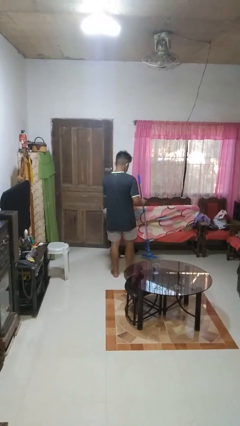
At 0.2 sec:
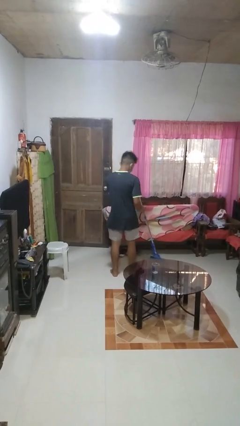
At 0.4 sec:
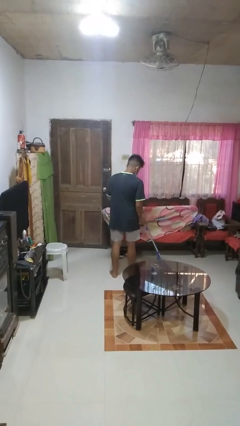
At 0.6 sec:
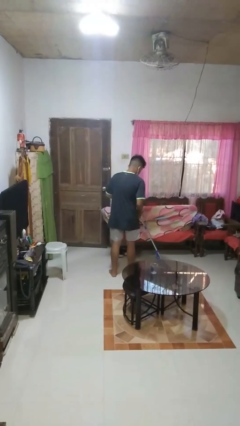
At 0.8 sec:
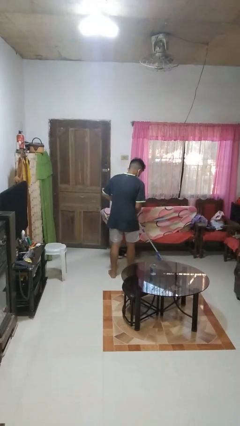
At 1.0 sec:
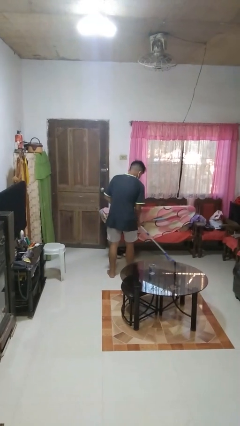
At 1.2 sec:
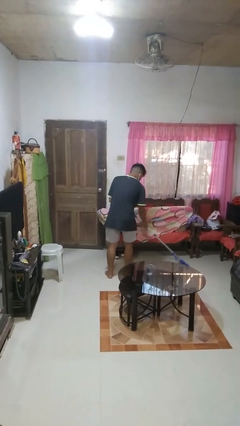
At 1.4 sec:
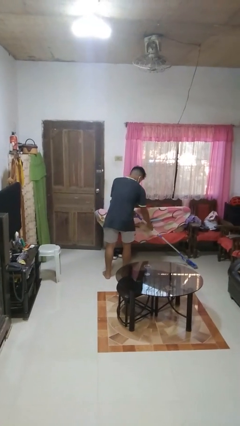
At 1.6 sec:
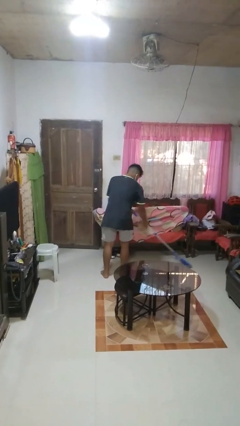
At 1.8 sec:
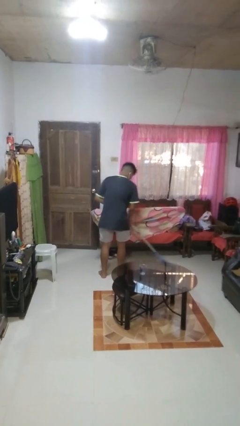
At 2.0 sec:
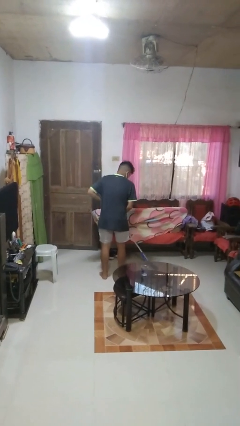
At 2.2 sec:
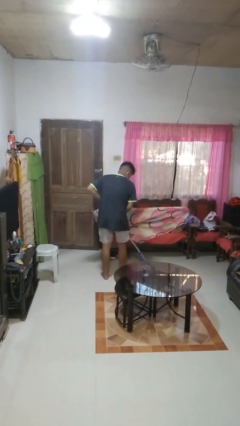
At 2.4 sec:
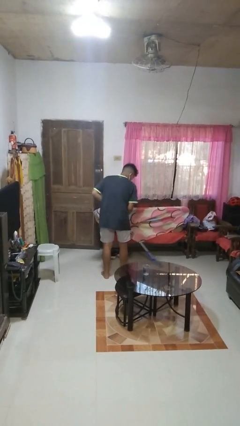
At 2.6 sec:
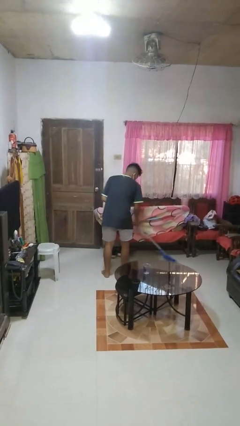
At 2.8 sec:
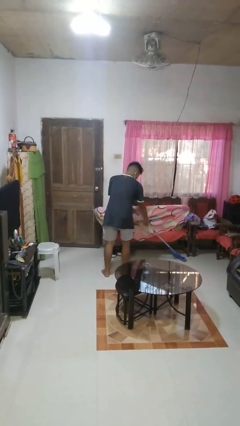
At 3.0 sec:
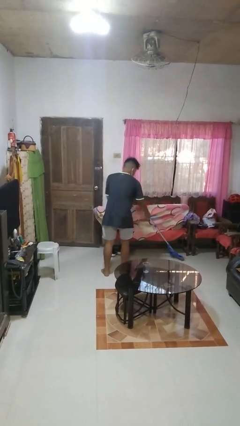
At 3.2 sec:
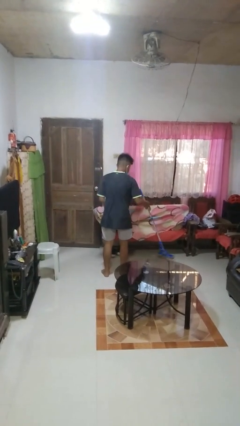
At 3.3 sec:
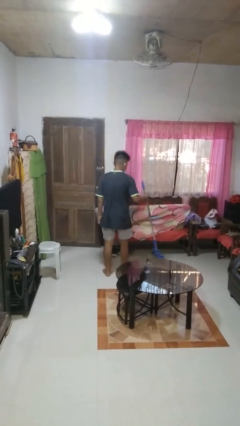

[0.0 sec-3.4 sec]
person mops

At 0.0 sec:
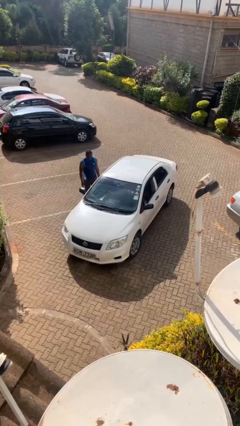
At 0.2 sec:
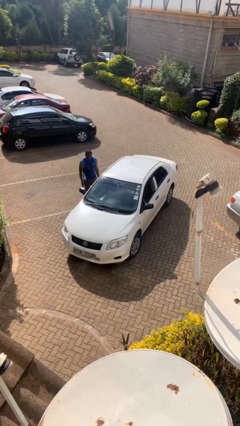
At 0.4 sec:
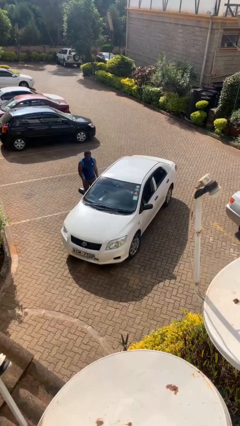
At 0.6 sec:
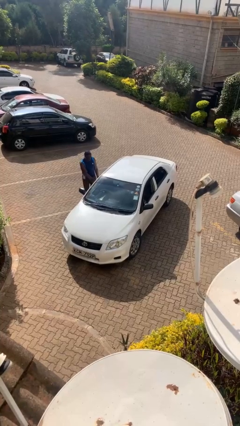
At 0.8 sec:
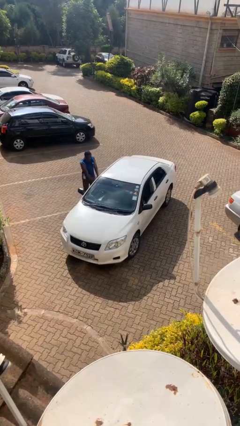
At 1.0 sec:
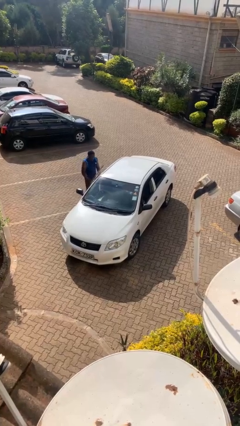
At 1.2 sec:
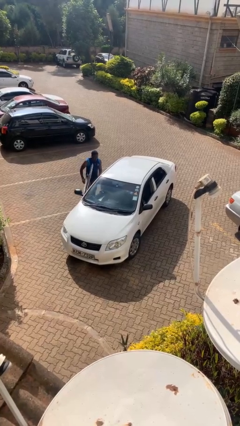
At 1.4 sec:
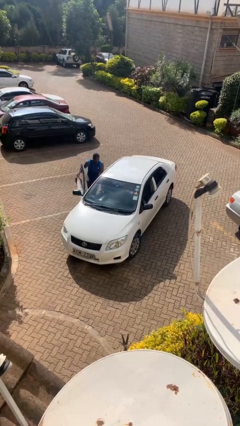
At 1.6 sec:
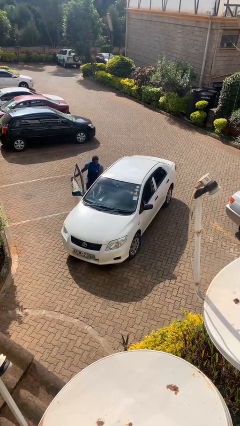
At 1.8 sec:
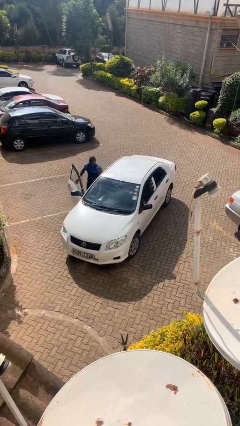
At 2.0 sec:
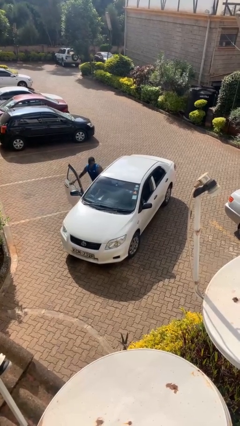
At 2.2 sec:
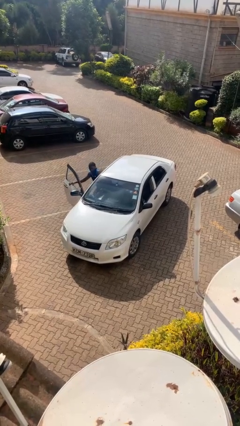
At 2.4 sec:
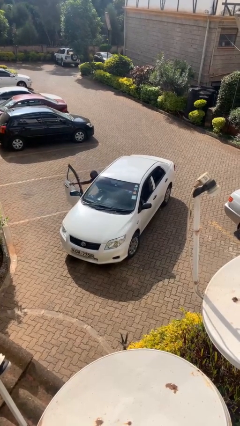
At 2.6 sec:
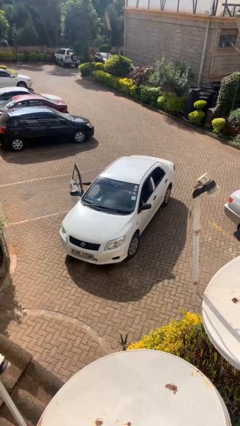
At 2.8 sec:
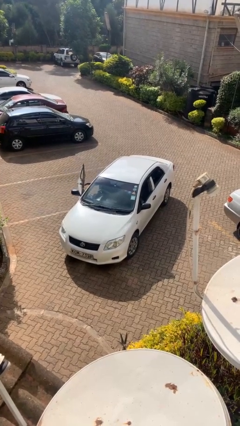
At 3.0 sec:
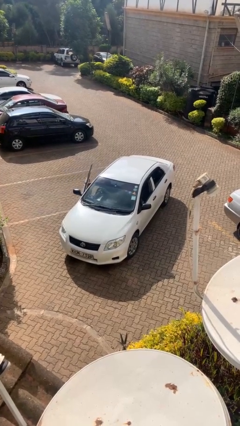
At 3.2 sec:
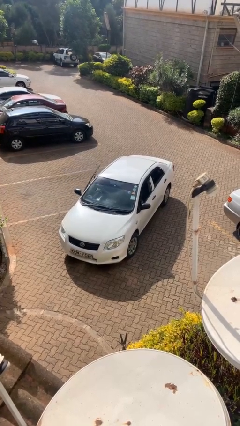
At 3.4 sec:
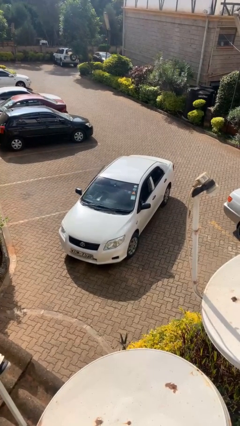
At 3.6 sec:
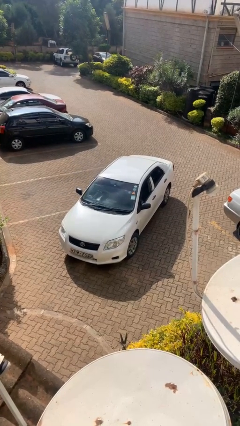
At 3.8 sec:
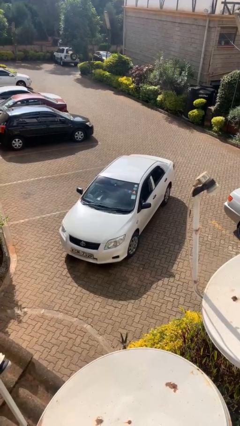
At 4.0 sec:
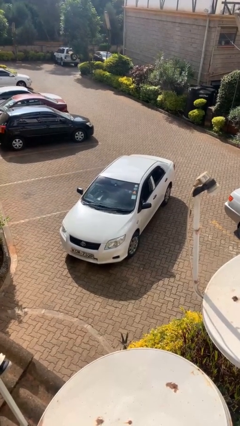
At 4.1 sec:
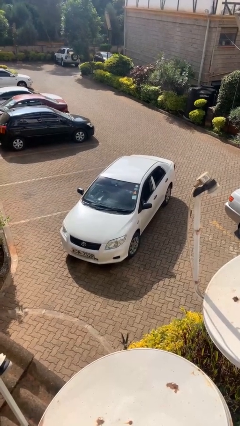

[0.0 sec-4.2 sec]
car picks up person

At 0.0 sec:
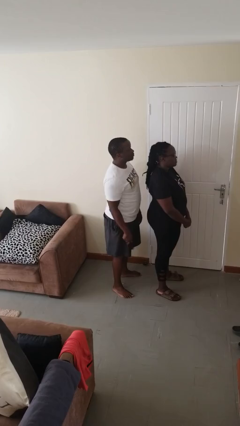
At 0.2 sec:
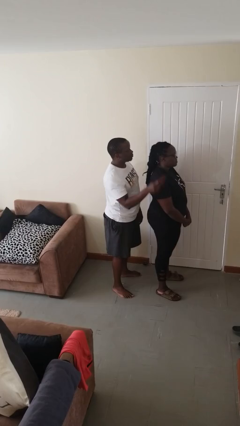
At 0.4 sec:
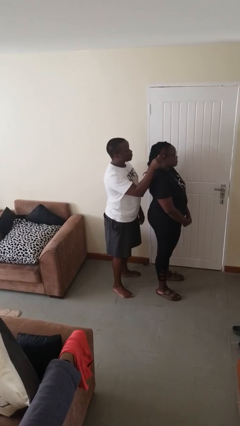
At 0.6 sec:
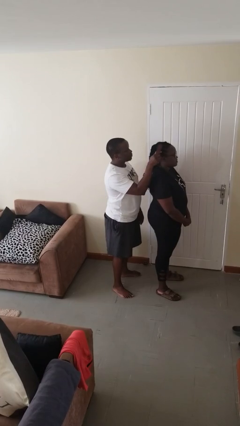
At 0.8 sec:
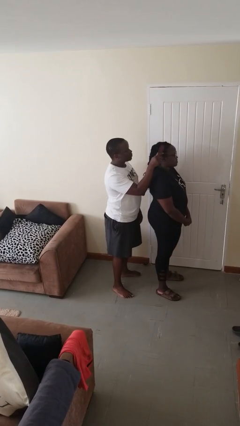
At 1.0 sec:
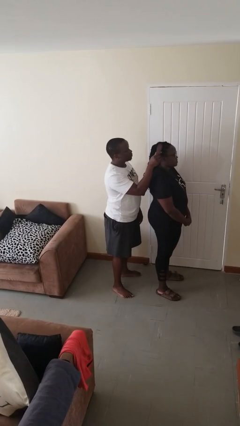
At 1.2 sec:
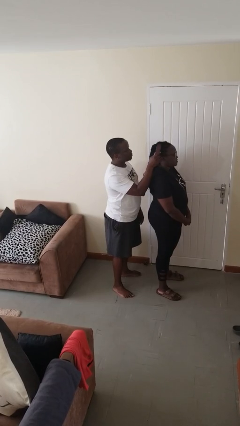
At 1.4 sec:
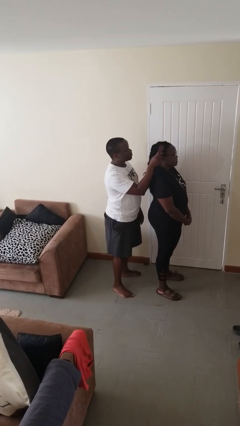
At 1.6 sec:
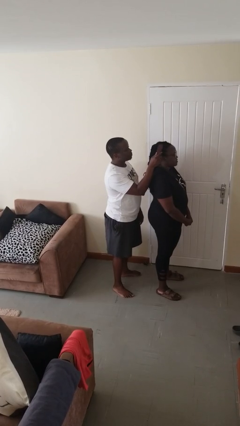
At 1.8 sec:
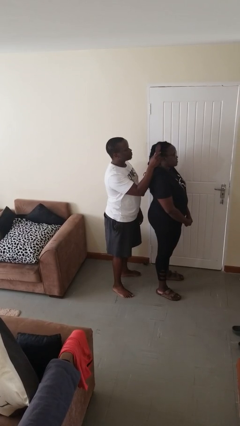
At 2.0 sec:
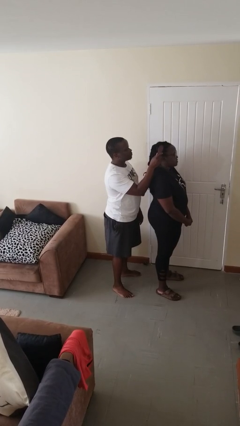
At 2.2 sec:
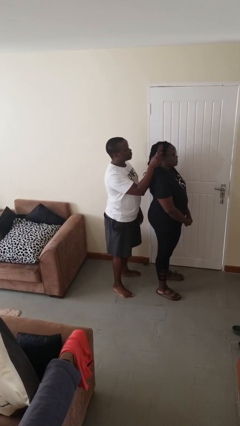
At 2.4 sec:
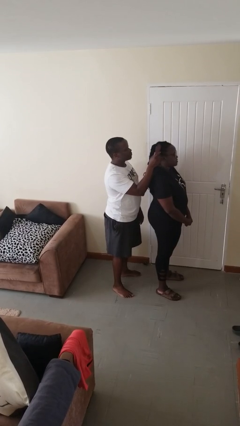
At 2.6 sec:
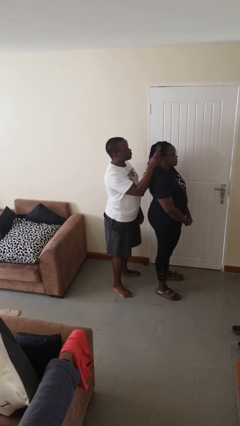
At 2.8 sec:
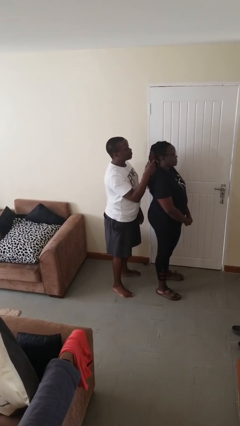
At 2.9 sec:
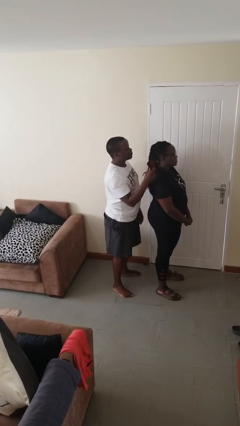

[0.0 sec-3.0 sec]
person brushes hair of person

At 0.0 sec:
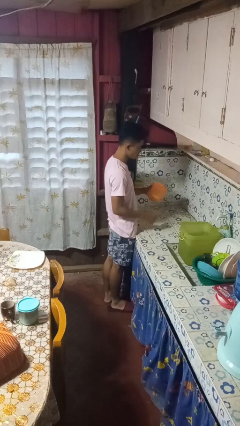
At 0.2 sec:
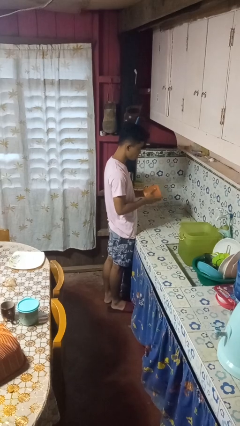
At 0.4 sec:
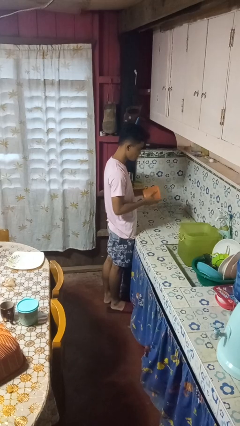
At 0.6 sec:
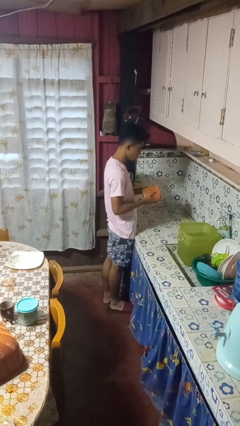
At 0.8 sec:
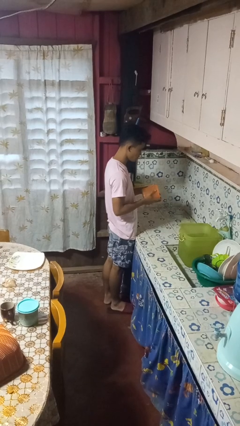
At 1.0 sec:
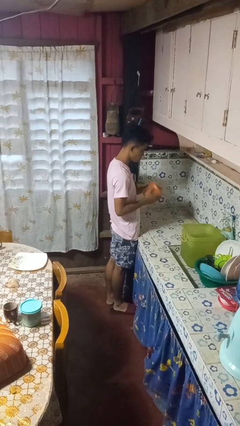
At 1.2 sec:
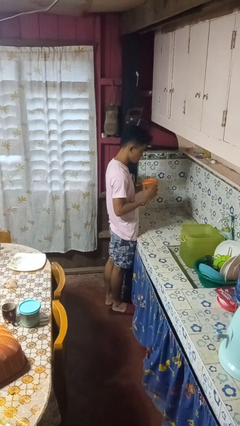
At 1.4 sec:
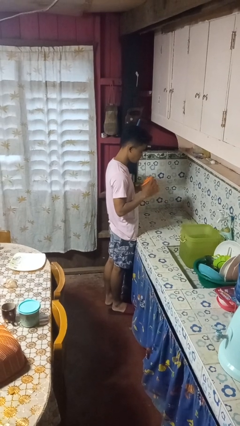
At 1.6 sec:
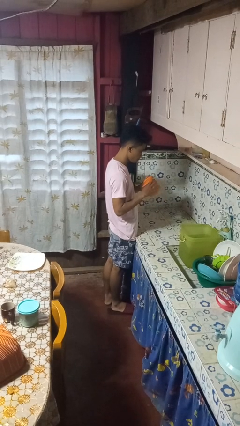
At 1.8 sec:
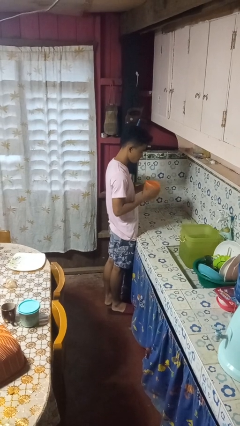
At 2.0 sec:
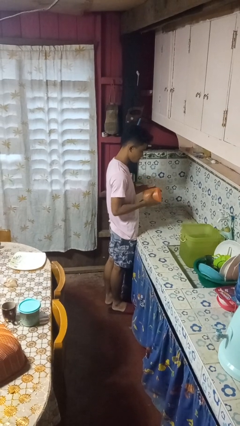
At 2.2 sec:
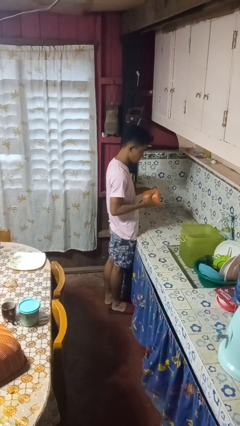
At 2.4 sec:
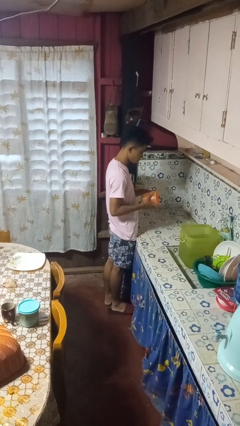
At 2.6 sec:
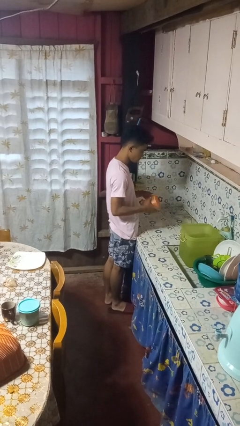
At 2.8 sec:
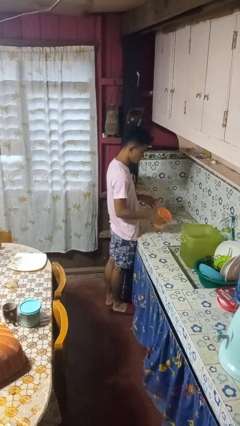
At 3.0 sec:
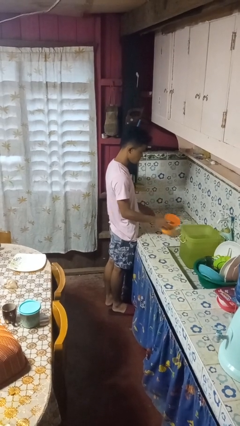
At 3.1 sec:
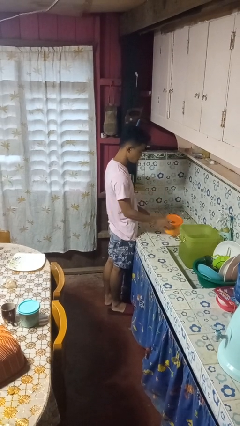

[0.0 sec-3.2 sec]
person picks up object from countertop

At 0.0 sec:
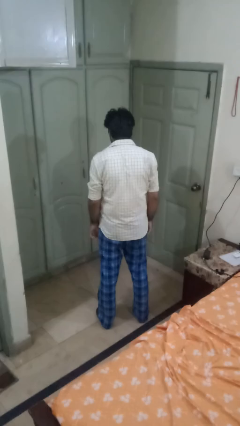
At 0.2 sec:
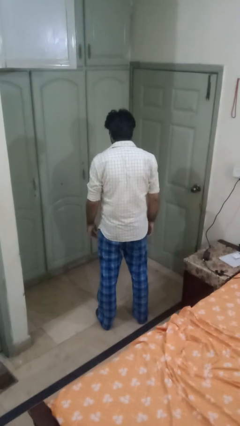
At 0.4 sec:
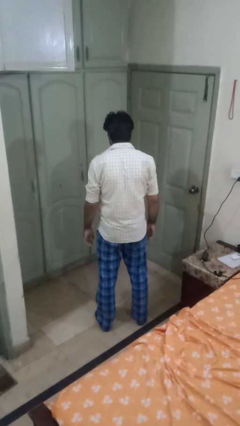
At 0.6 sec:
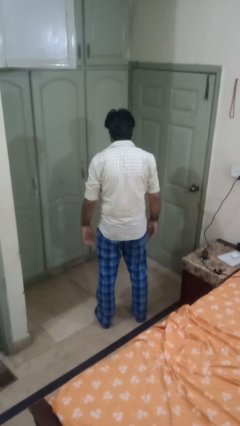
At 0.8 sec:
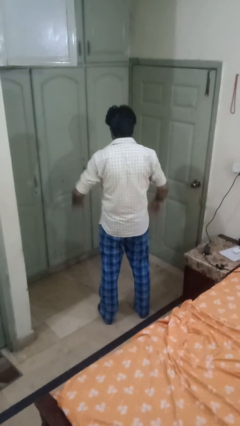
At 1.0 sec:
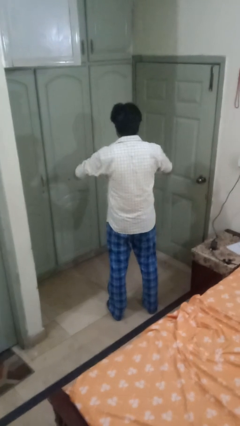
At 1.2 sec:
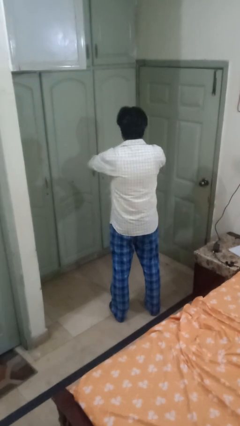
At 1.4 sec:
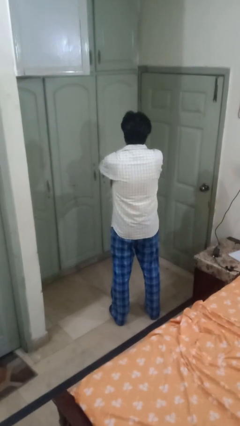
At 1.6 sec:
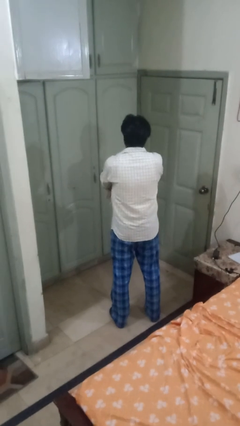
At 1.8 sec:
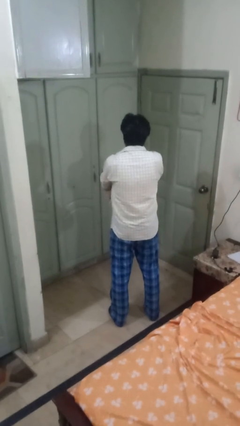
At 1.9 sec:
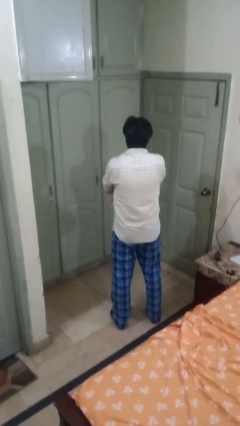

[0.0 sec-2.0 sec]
person crosses arms

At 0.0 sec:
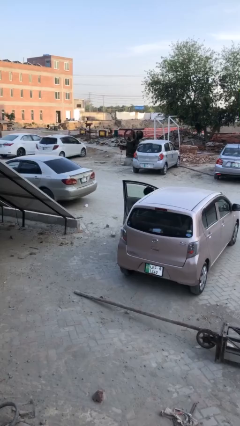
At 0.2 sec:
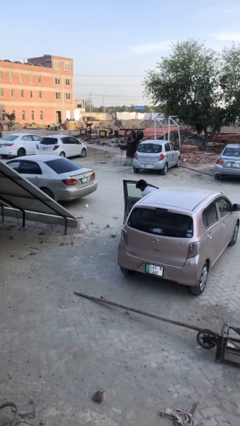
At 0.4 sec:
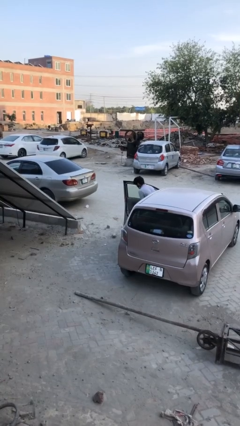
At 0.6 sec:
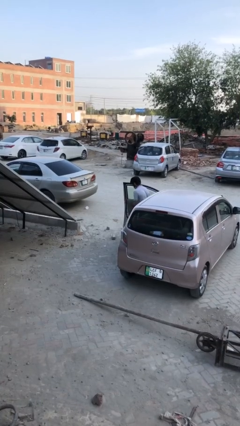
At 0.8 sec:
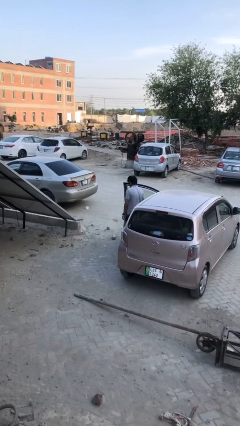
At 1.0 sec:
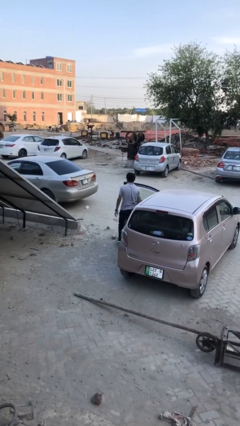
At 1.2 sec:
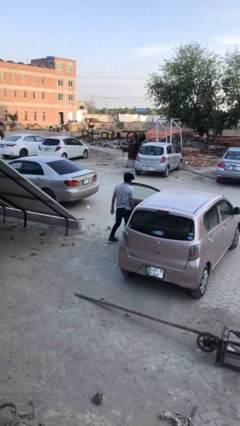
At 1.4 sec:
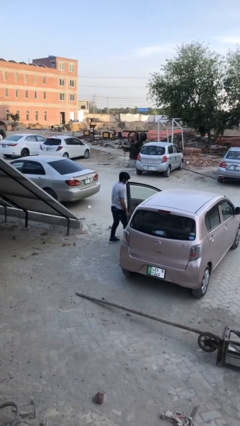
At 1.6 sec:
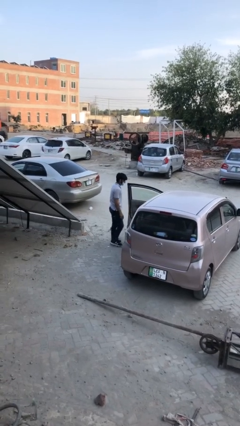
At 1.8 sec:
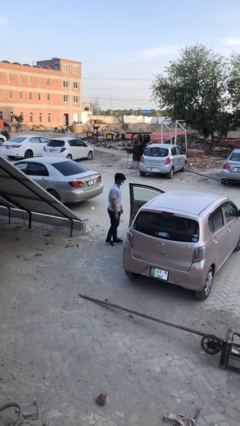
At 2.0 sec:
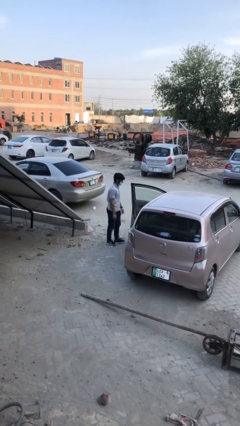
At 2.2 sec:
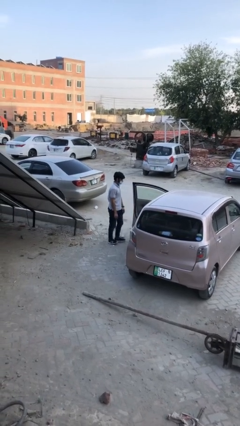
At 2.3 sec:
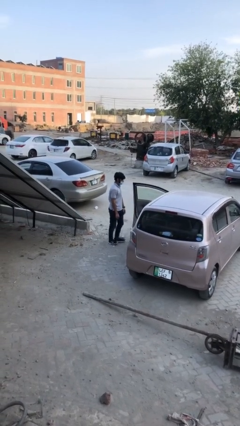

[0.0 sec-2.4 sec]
person exits car
